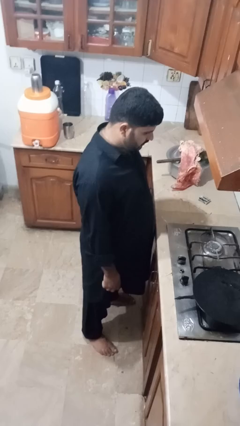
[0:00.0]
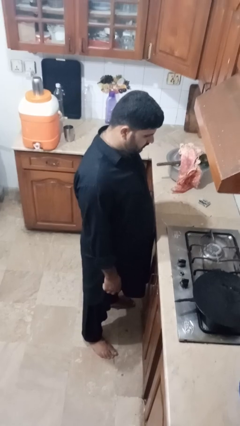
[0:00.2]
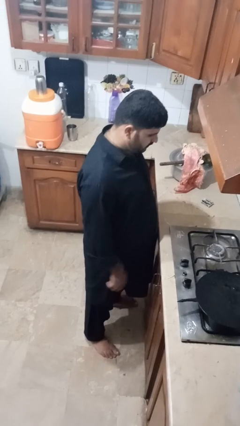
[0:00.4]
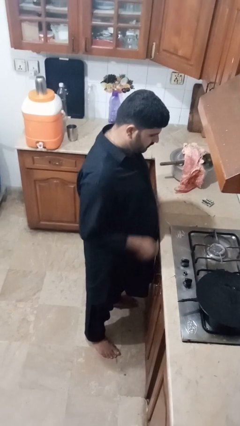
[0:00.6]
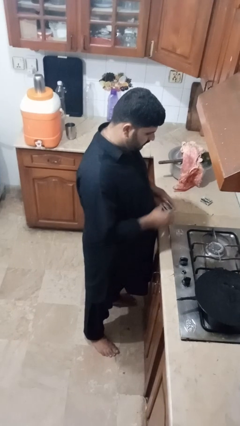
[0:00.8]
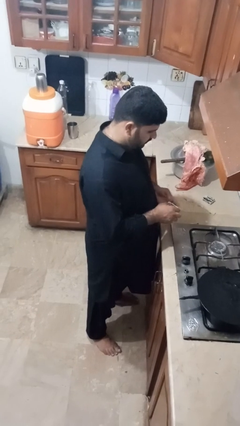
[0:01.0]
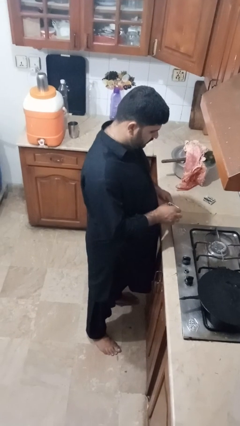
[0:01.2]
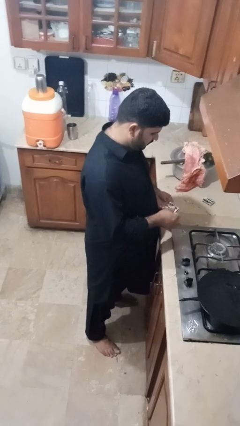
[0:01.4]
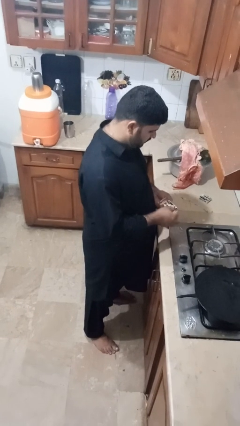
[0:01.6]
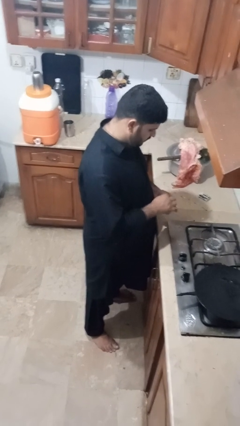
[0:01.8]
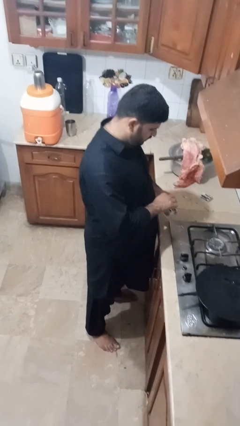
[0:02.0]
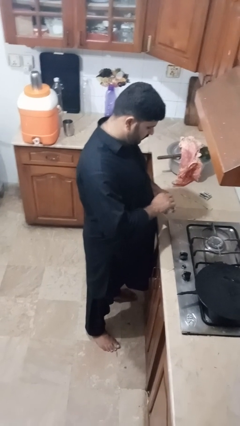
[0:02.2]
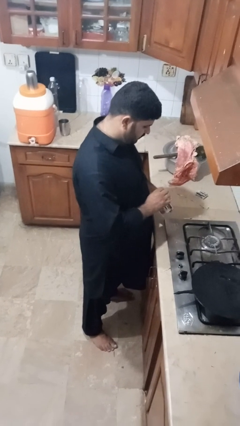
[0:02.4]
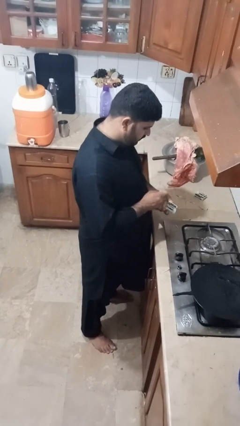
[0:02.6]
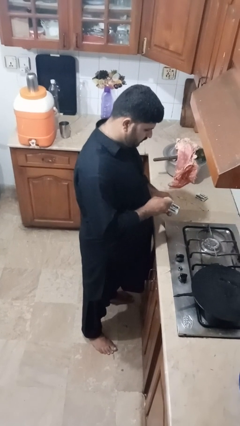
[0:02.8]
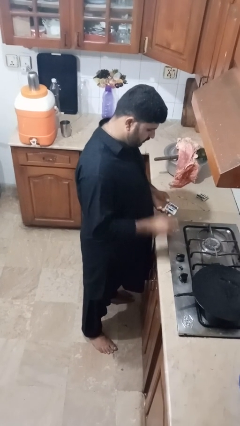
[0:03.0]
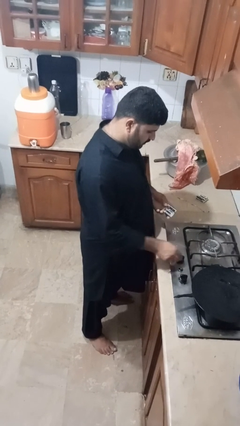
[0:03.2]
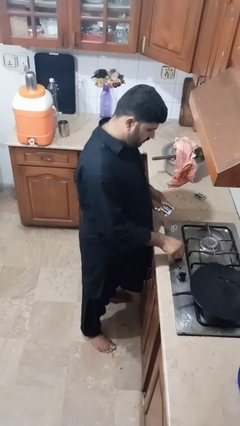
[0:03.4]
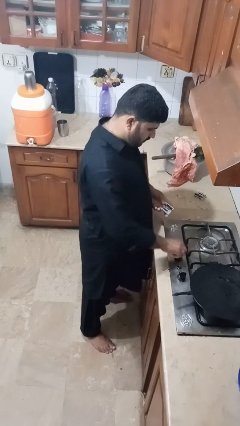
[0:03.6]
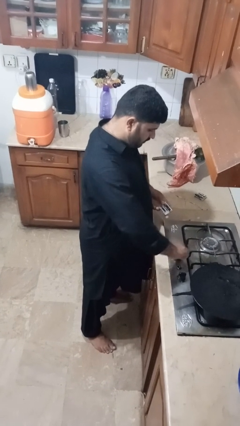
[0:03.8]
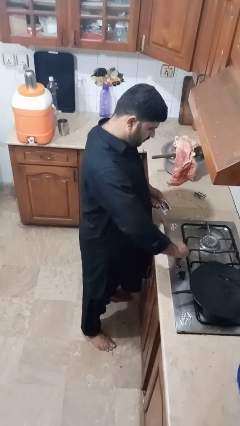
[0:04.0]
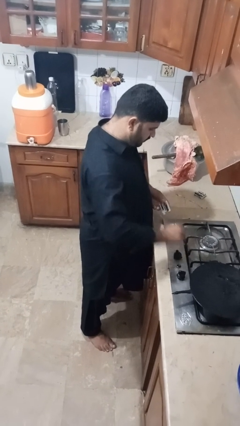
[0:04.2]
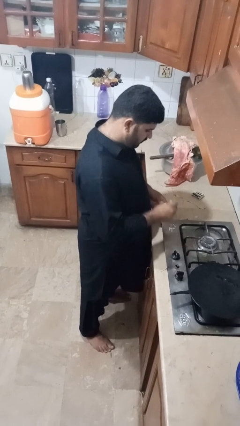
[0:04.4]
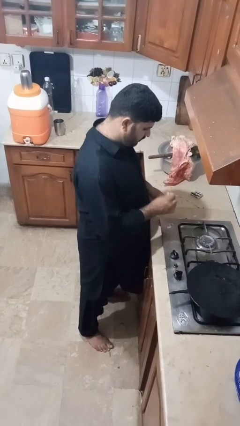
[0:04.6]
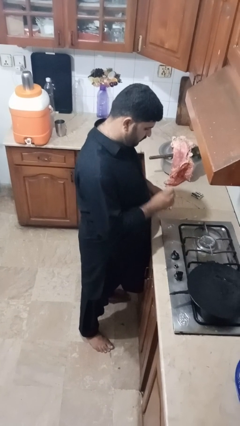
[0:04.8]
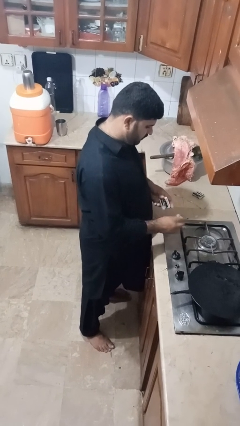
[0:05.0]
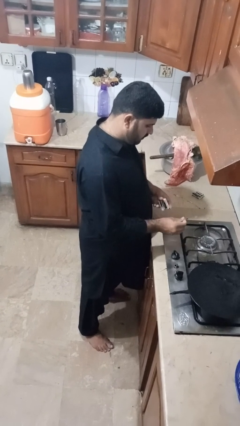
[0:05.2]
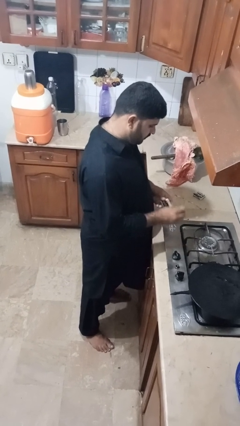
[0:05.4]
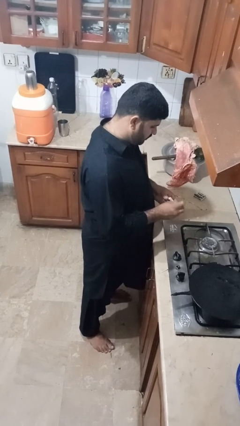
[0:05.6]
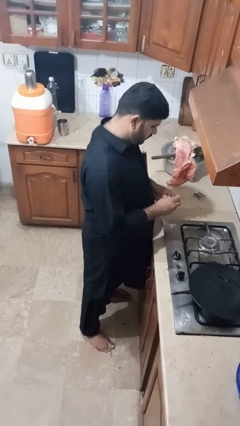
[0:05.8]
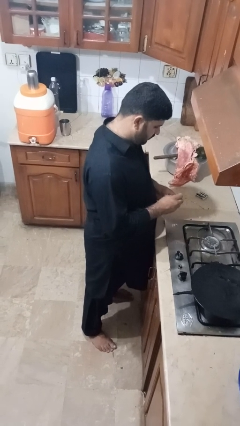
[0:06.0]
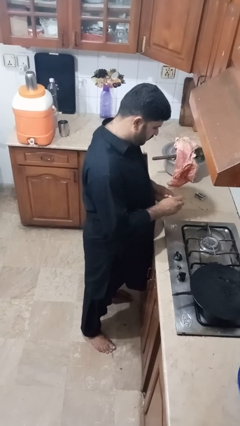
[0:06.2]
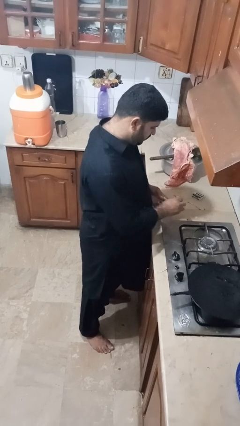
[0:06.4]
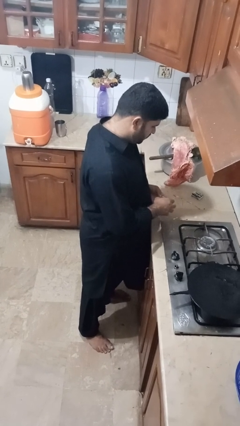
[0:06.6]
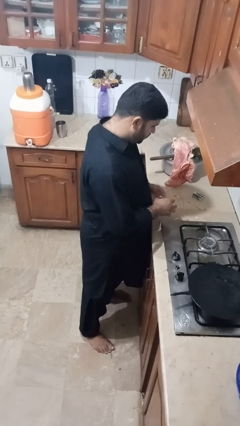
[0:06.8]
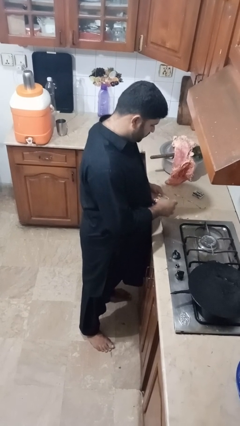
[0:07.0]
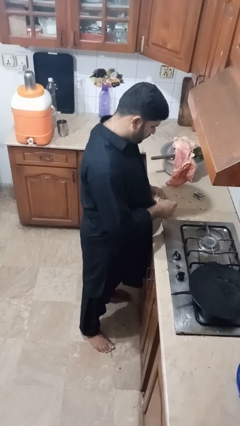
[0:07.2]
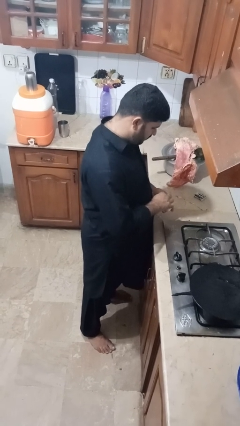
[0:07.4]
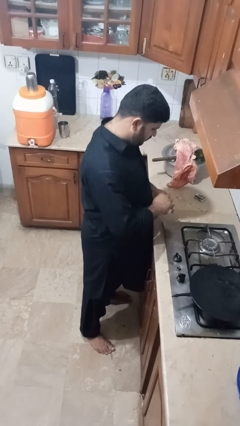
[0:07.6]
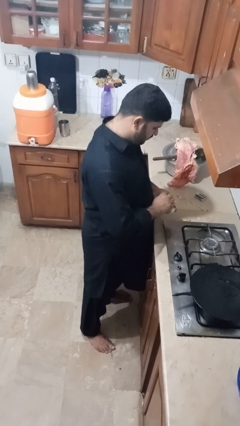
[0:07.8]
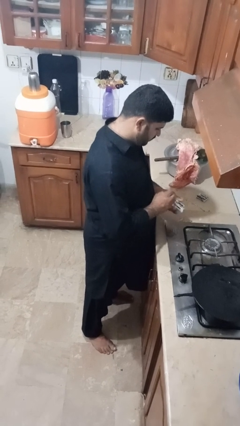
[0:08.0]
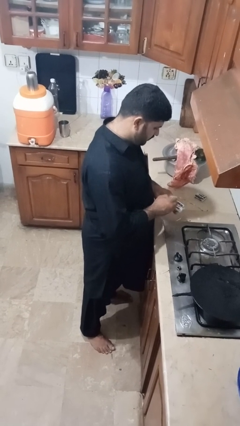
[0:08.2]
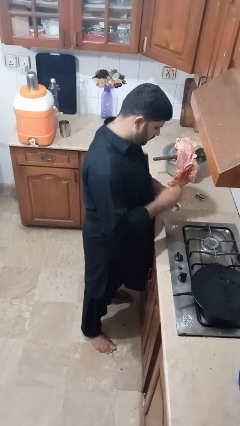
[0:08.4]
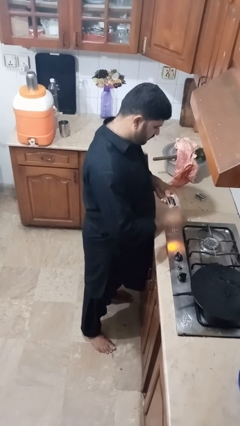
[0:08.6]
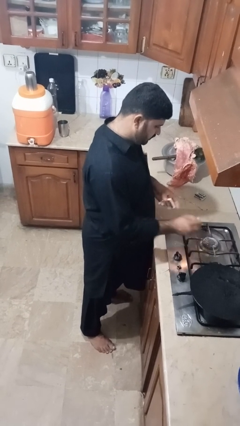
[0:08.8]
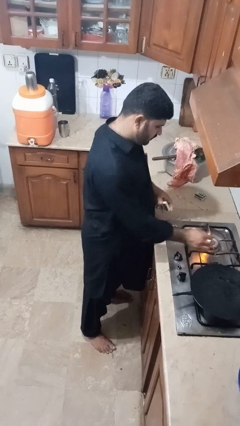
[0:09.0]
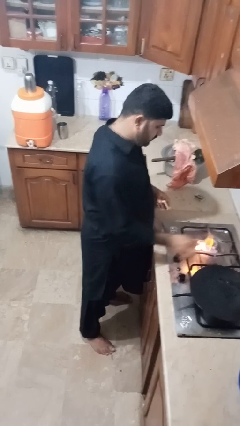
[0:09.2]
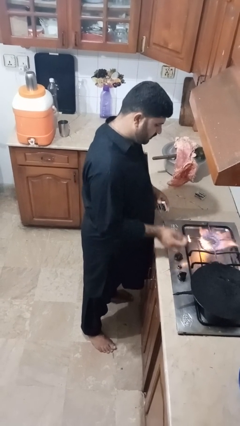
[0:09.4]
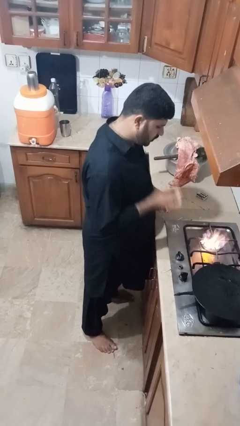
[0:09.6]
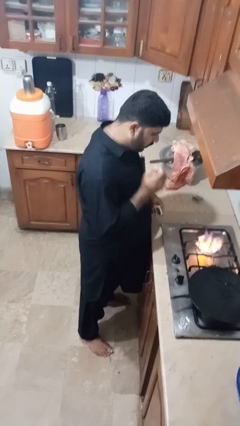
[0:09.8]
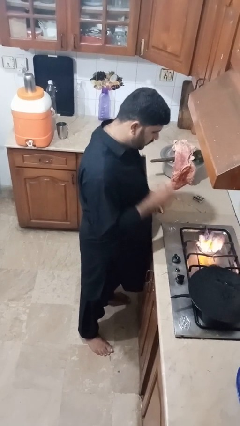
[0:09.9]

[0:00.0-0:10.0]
person turns on stovetop

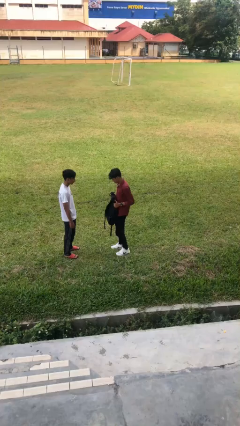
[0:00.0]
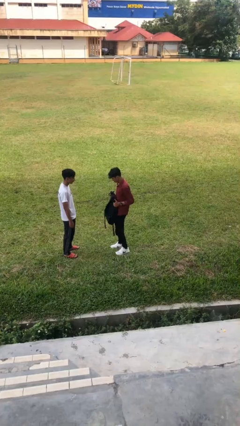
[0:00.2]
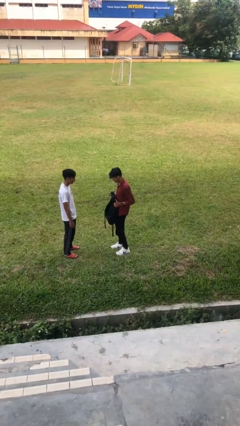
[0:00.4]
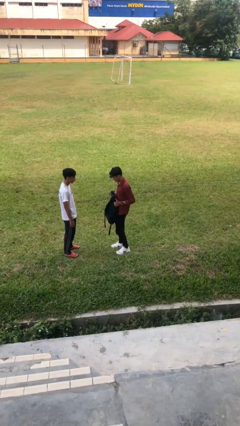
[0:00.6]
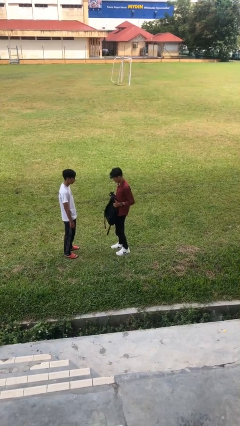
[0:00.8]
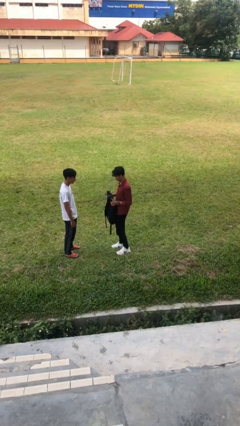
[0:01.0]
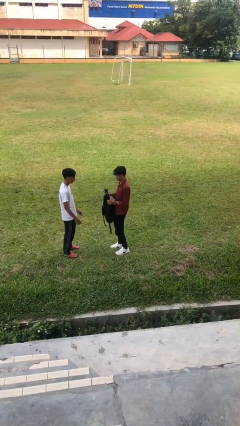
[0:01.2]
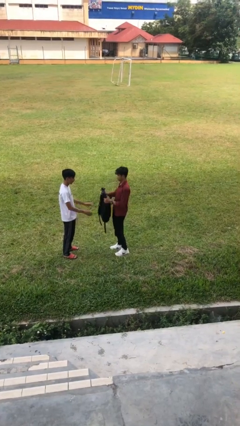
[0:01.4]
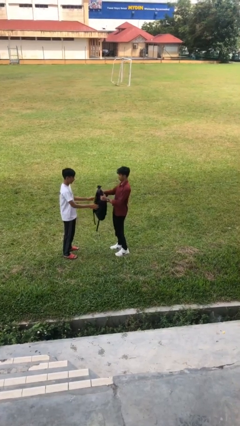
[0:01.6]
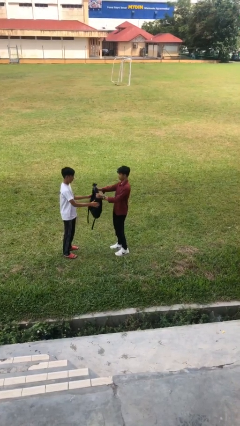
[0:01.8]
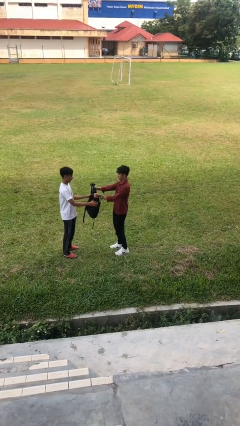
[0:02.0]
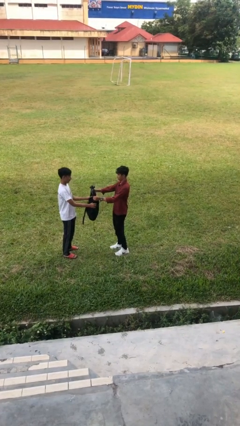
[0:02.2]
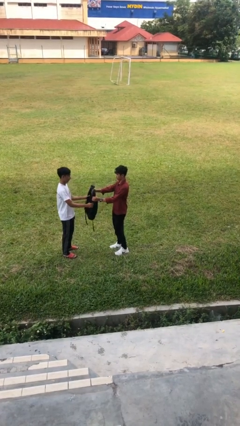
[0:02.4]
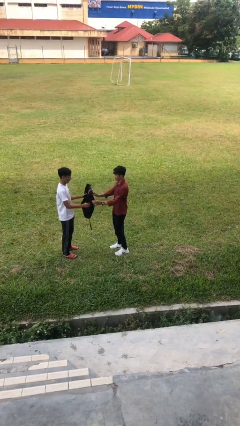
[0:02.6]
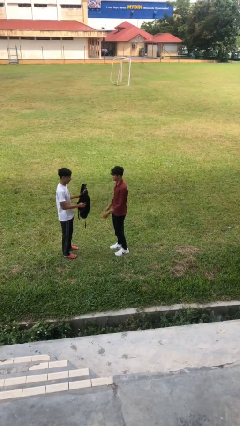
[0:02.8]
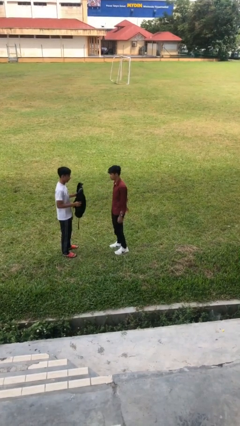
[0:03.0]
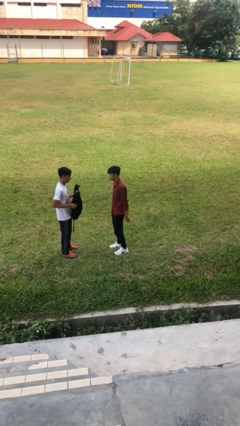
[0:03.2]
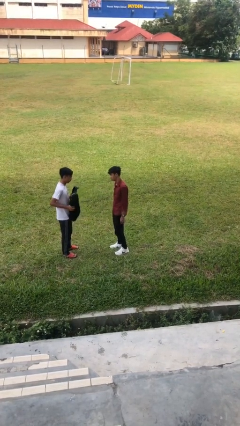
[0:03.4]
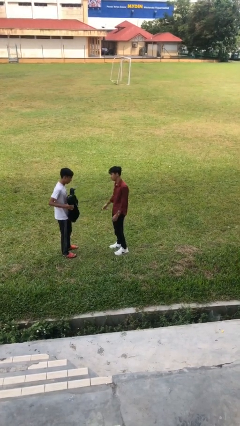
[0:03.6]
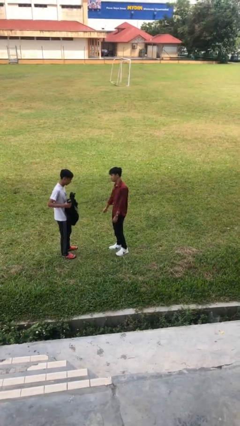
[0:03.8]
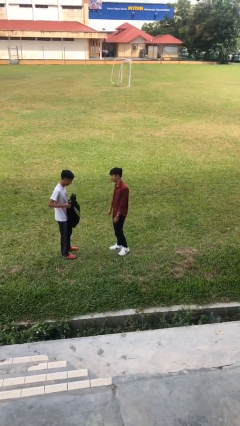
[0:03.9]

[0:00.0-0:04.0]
person transfers object to person

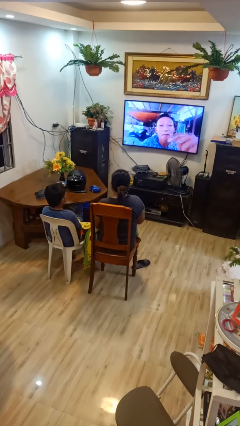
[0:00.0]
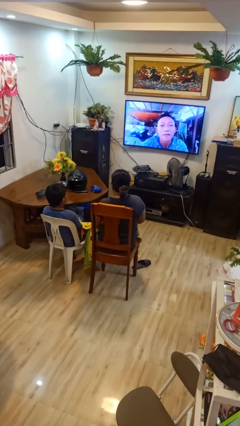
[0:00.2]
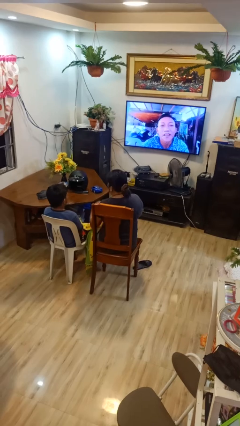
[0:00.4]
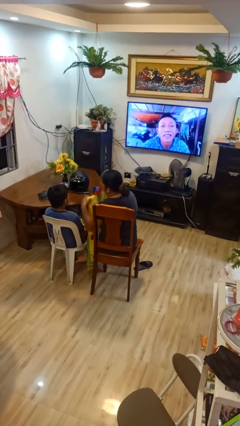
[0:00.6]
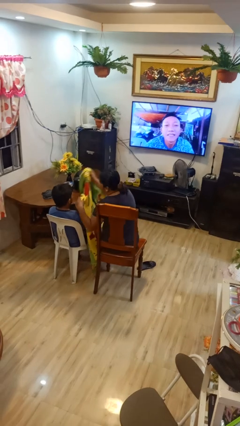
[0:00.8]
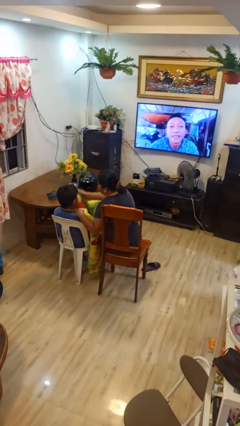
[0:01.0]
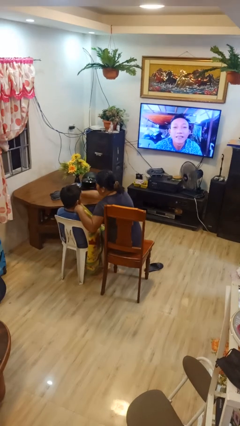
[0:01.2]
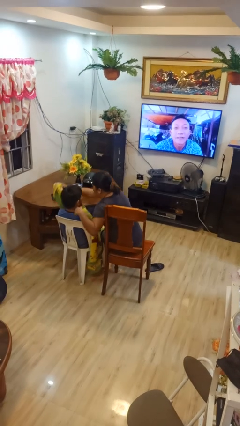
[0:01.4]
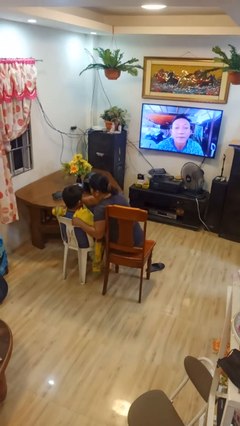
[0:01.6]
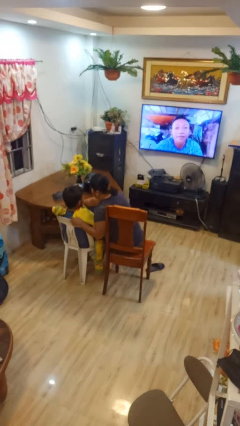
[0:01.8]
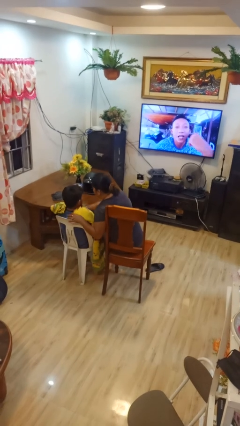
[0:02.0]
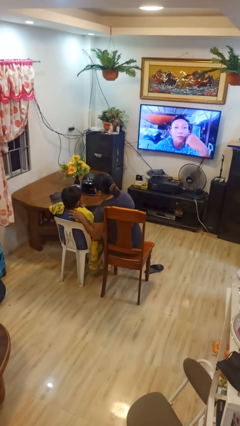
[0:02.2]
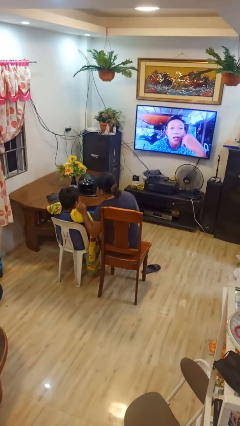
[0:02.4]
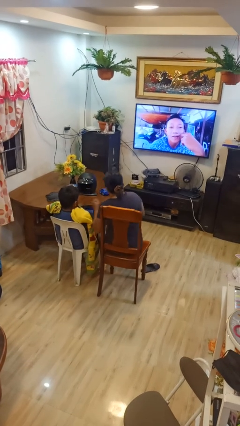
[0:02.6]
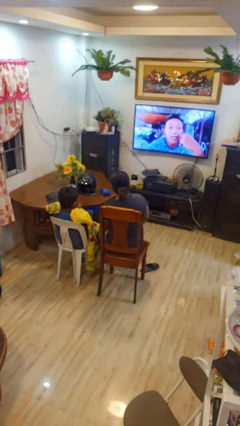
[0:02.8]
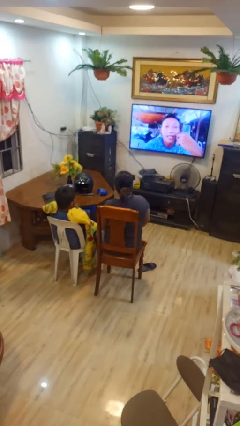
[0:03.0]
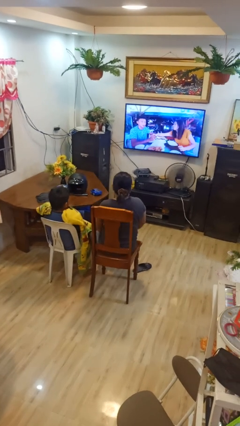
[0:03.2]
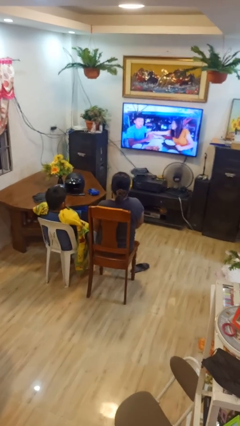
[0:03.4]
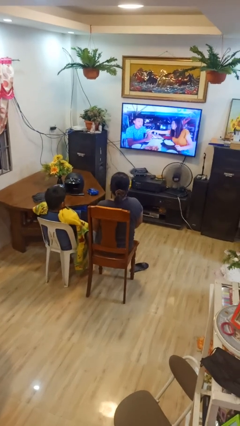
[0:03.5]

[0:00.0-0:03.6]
person covers friend with blanket
